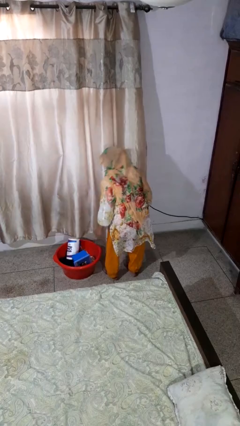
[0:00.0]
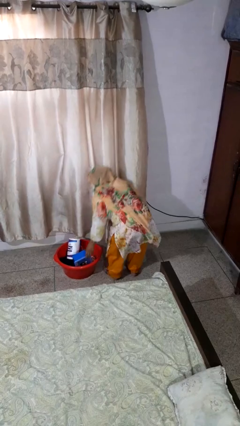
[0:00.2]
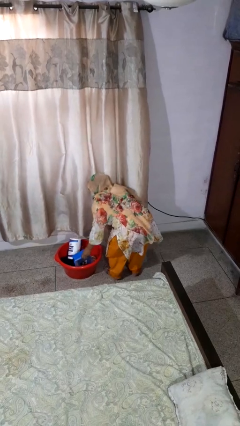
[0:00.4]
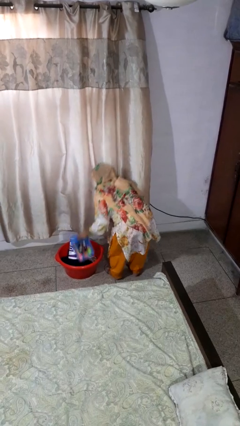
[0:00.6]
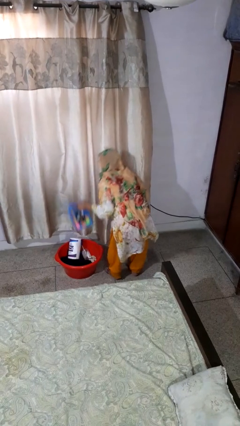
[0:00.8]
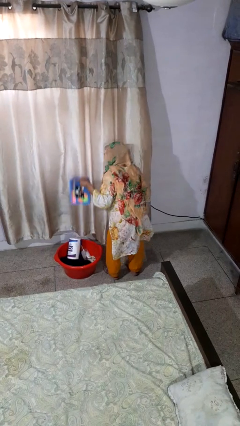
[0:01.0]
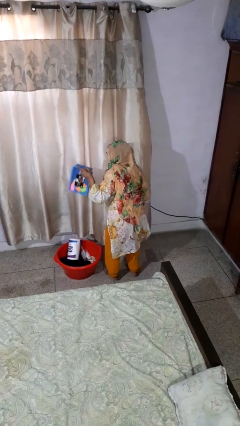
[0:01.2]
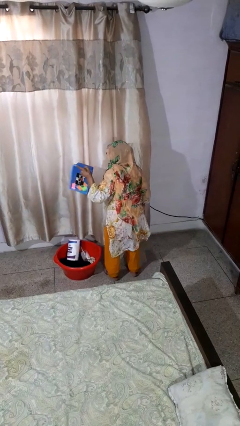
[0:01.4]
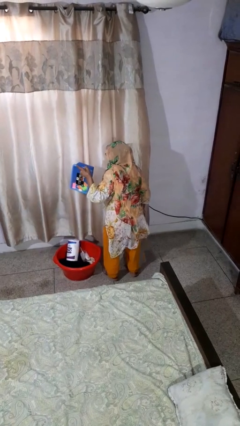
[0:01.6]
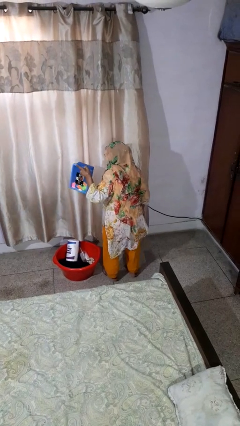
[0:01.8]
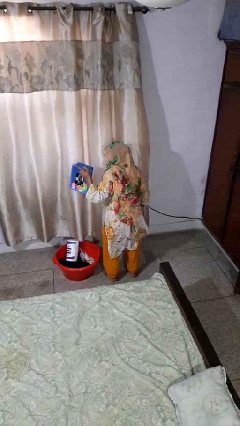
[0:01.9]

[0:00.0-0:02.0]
person takes object from basket

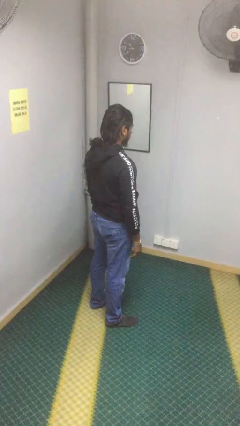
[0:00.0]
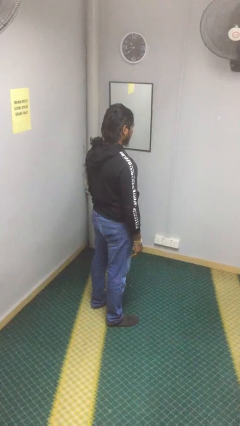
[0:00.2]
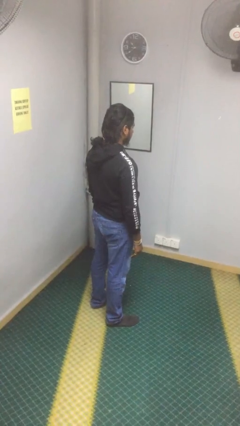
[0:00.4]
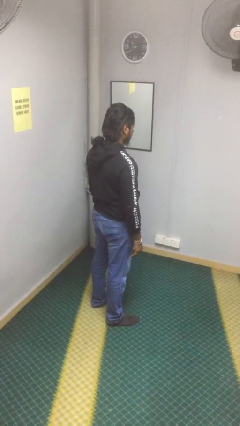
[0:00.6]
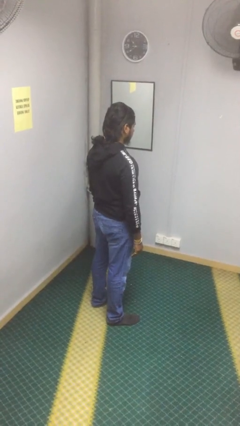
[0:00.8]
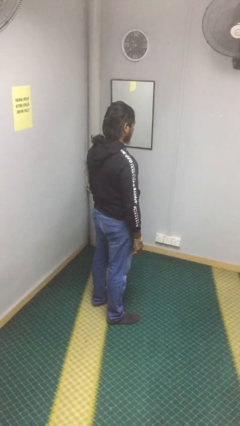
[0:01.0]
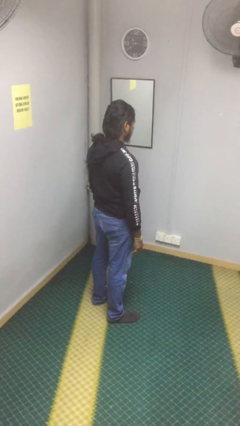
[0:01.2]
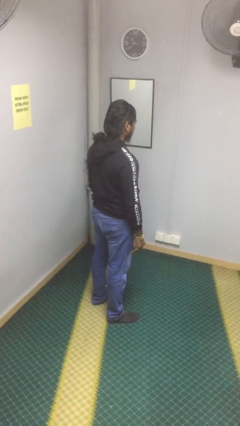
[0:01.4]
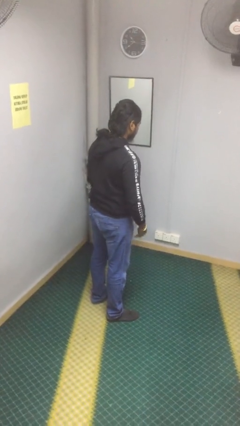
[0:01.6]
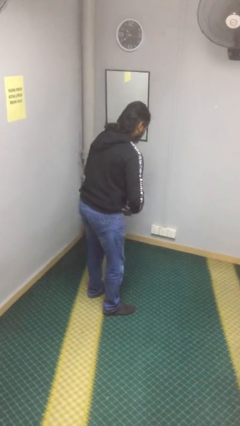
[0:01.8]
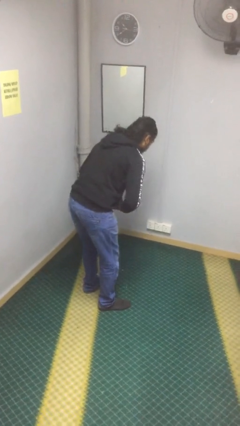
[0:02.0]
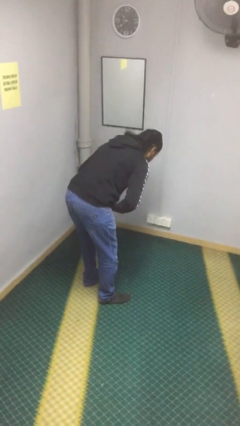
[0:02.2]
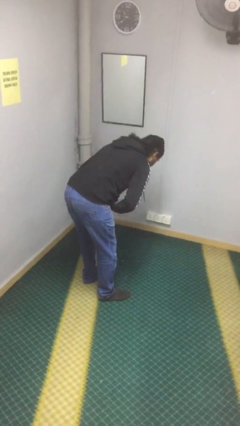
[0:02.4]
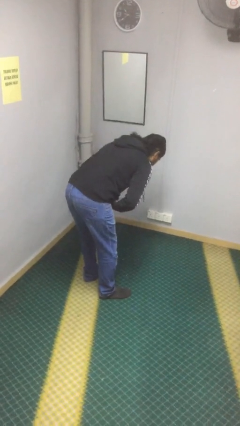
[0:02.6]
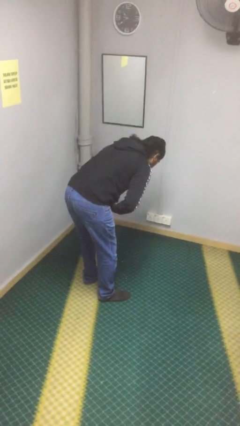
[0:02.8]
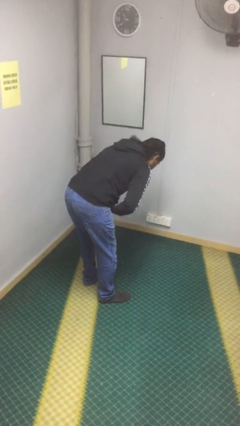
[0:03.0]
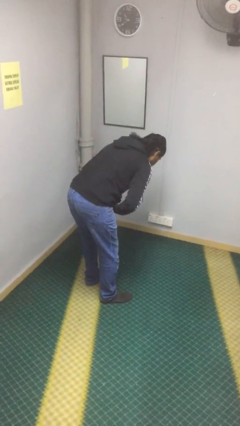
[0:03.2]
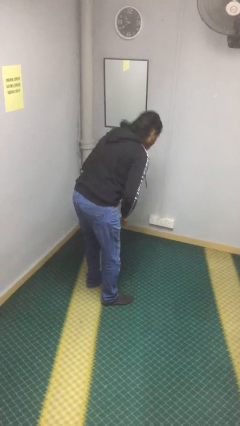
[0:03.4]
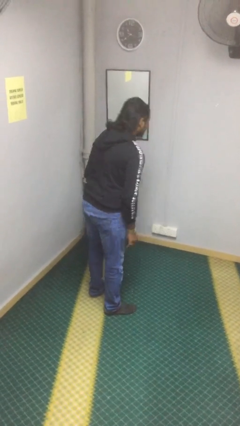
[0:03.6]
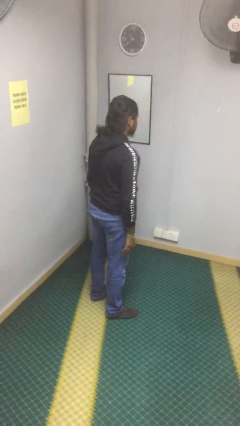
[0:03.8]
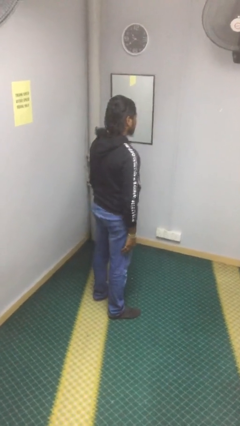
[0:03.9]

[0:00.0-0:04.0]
person bows

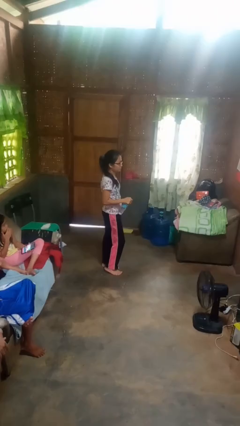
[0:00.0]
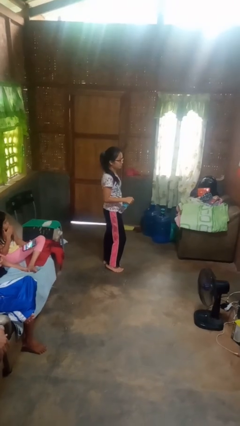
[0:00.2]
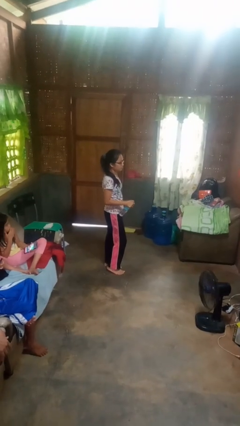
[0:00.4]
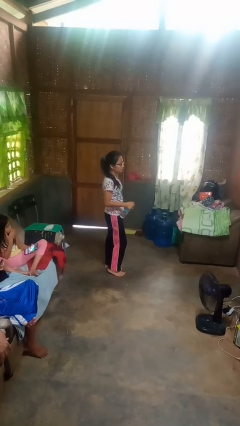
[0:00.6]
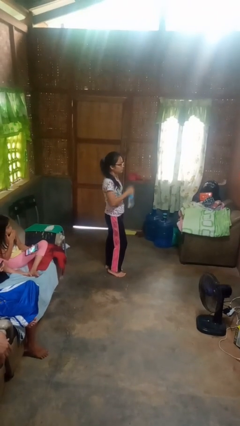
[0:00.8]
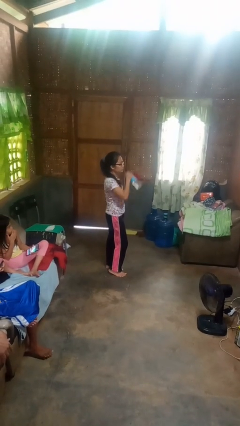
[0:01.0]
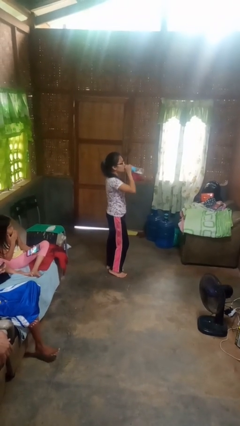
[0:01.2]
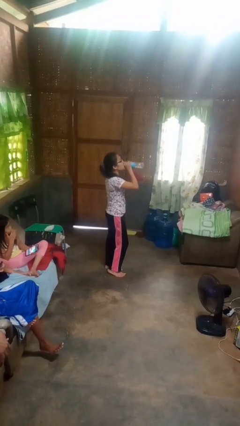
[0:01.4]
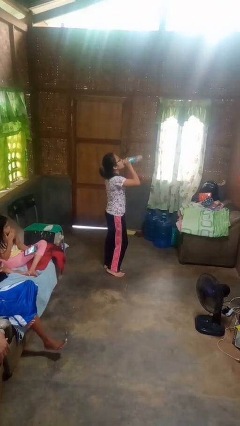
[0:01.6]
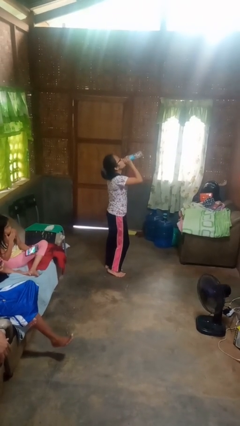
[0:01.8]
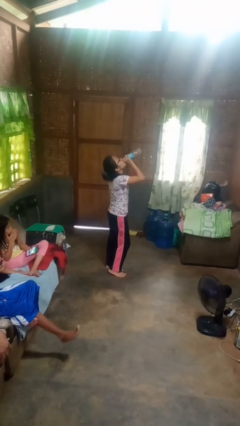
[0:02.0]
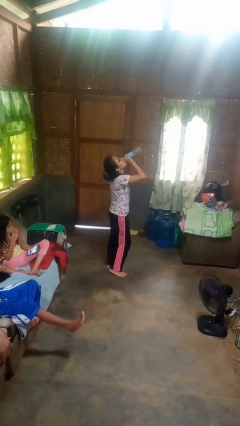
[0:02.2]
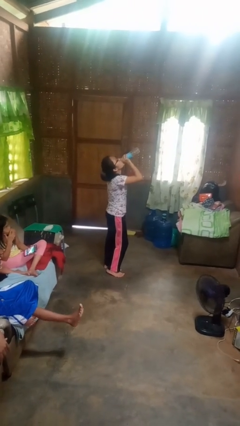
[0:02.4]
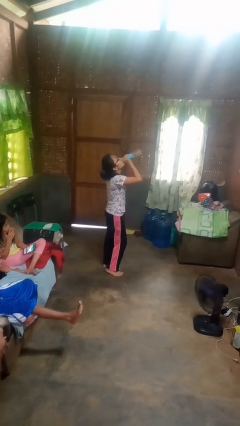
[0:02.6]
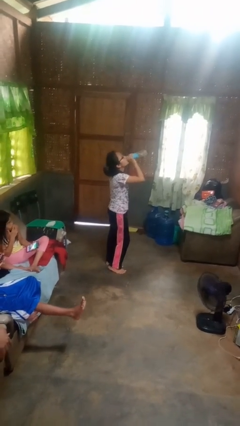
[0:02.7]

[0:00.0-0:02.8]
person drinks from bottle

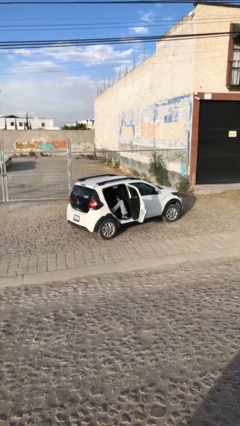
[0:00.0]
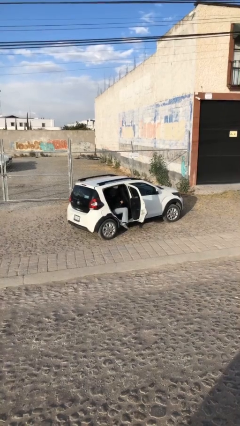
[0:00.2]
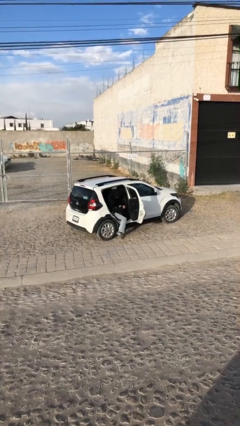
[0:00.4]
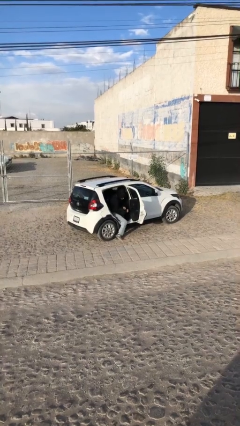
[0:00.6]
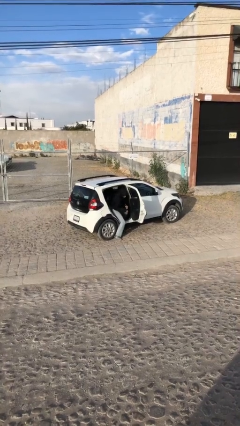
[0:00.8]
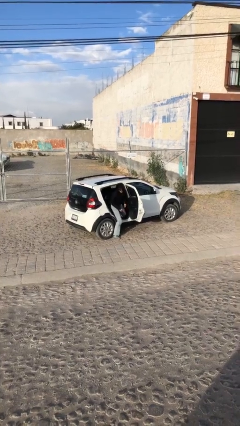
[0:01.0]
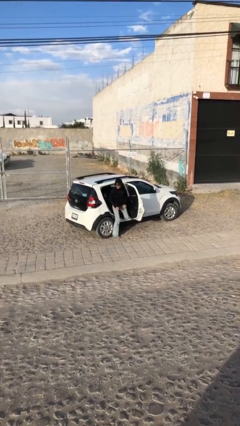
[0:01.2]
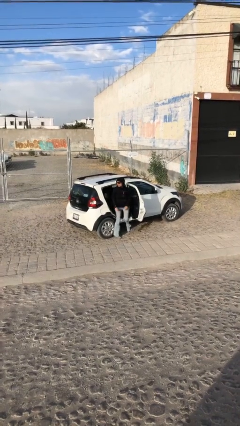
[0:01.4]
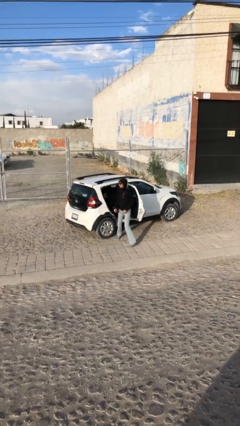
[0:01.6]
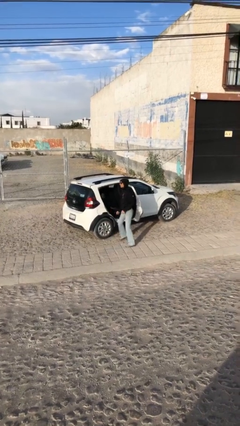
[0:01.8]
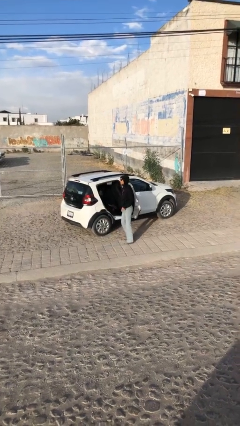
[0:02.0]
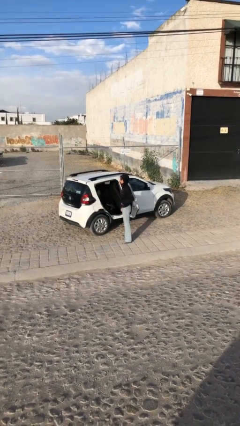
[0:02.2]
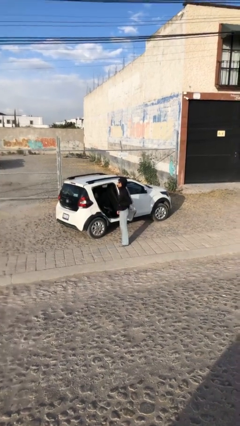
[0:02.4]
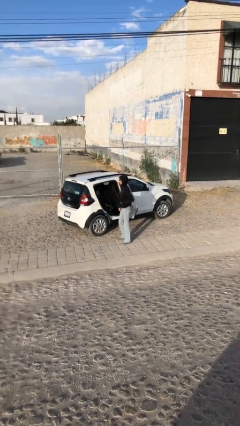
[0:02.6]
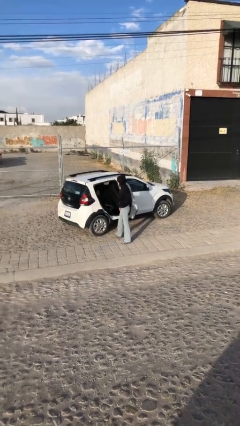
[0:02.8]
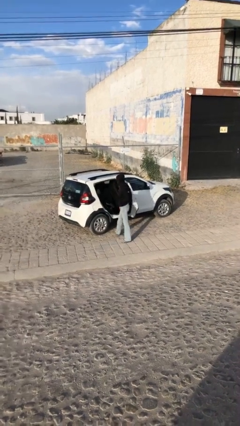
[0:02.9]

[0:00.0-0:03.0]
person exits car

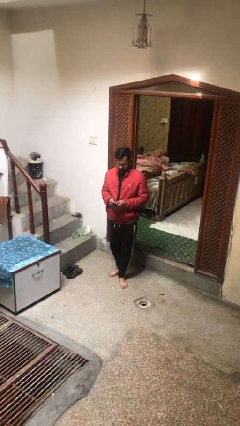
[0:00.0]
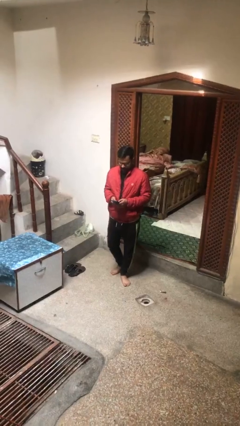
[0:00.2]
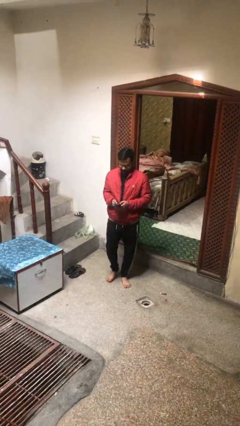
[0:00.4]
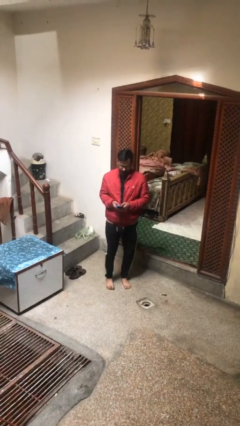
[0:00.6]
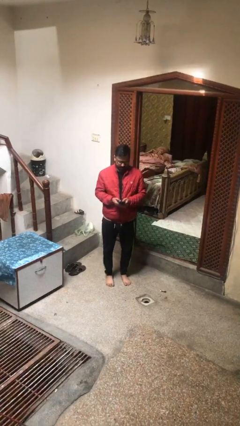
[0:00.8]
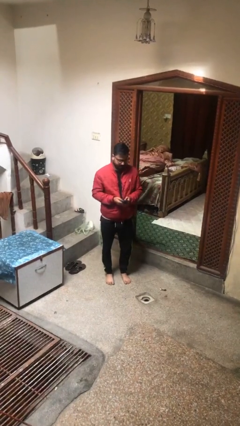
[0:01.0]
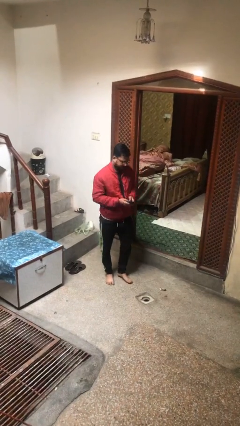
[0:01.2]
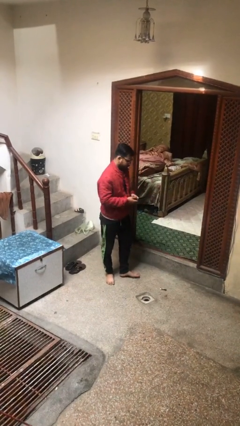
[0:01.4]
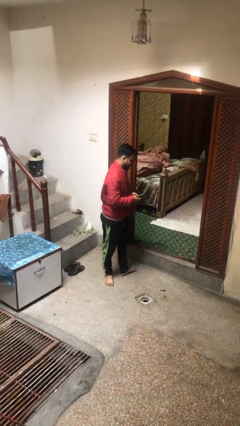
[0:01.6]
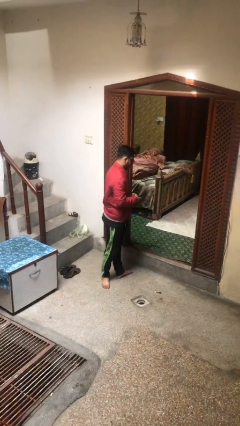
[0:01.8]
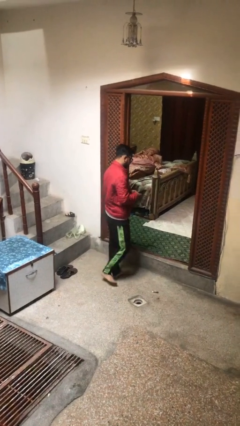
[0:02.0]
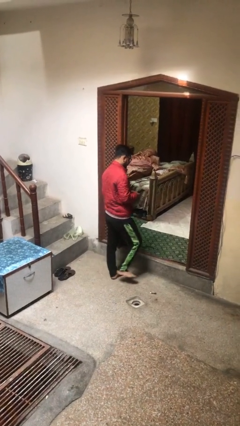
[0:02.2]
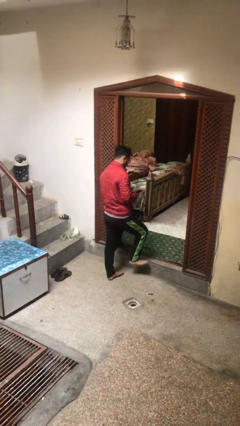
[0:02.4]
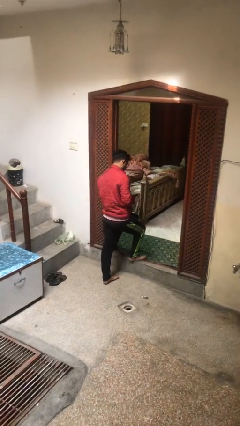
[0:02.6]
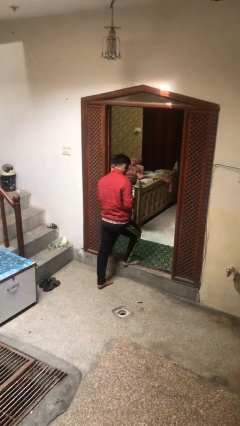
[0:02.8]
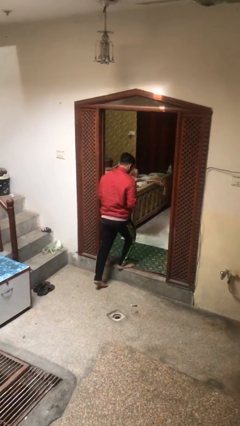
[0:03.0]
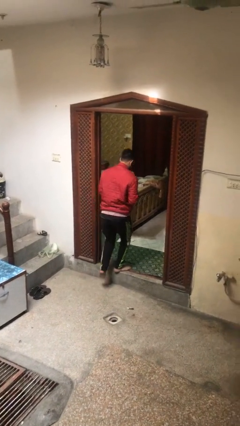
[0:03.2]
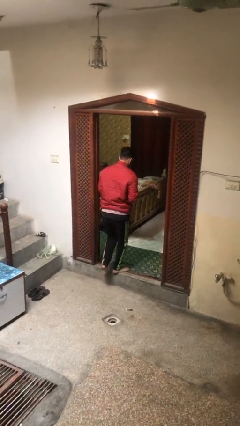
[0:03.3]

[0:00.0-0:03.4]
person exits scene through structure

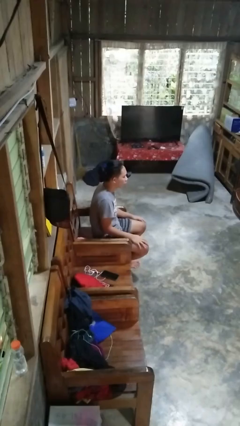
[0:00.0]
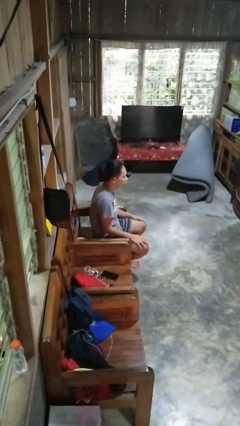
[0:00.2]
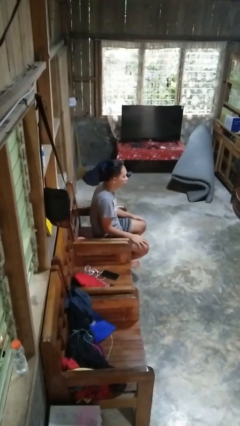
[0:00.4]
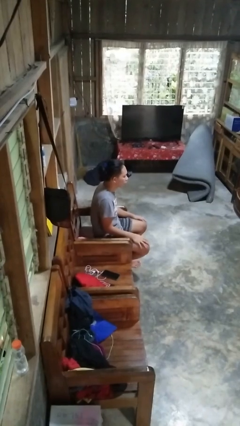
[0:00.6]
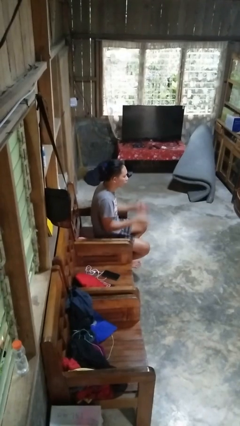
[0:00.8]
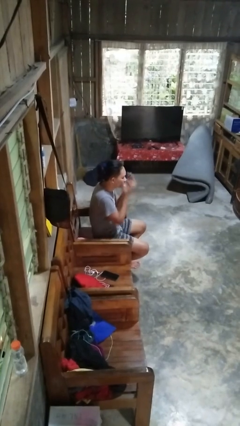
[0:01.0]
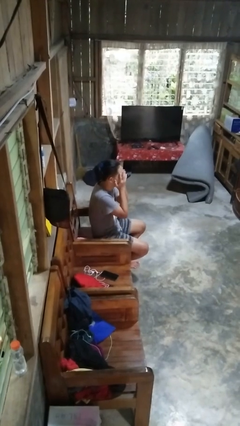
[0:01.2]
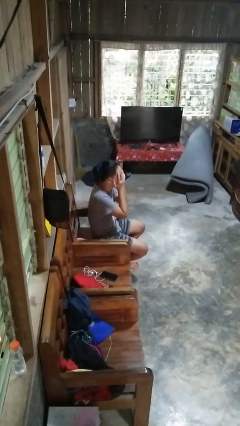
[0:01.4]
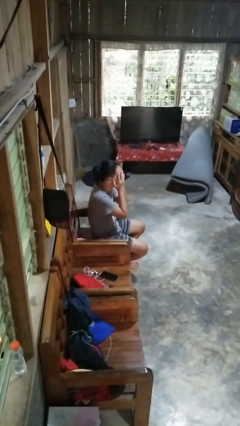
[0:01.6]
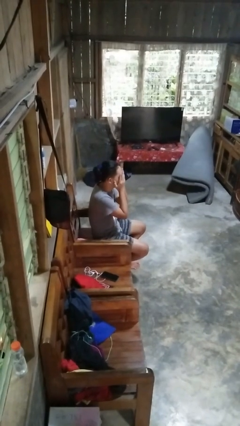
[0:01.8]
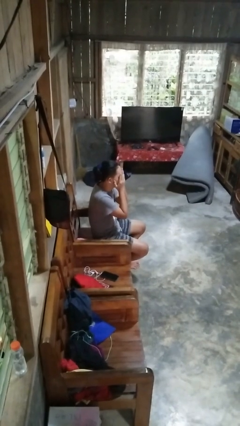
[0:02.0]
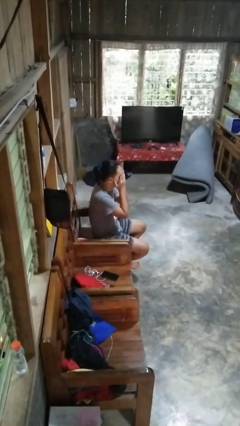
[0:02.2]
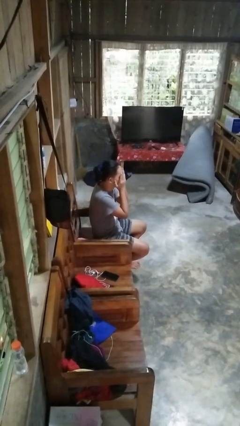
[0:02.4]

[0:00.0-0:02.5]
person covers face with hands

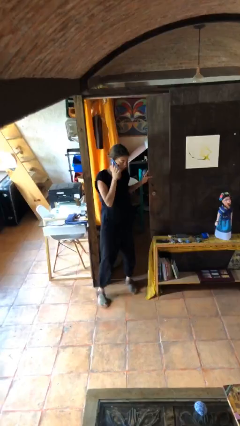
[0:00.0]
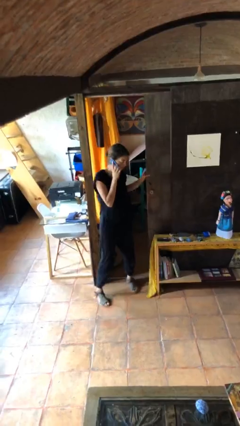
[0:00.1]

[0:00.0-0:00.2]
person closes facility door
